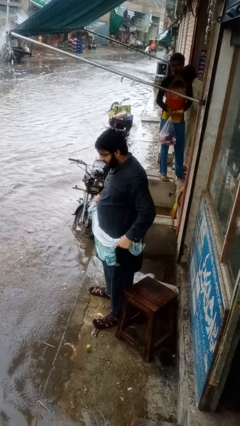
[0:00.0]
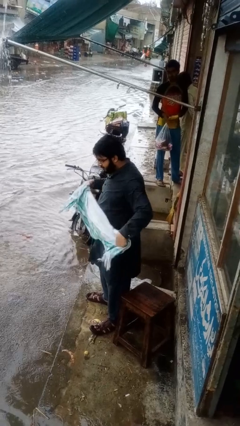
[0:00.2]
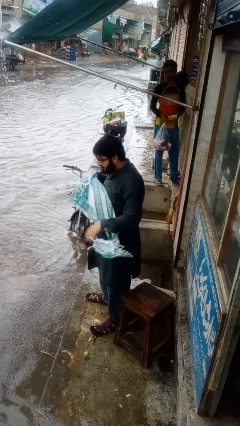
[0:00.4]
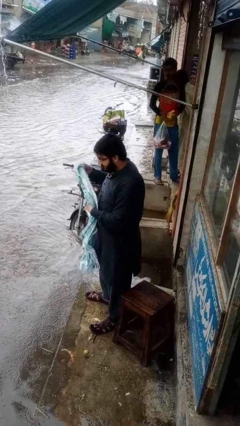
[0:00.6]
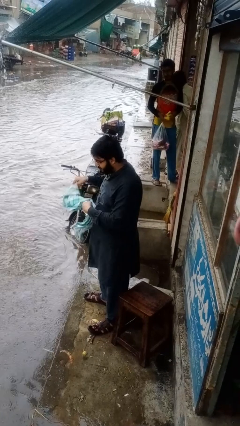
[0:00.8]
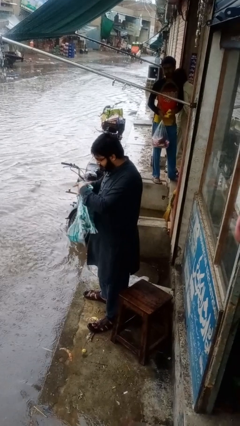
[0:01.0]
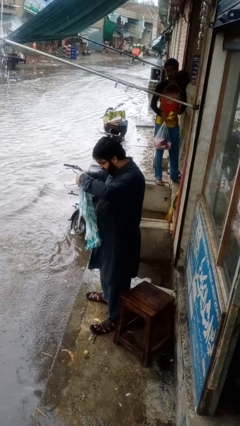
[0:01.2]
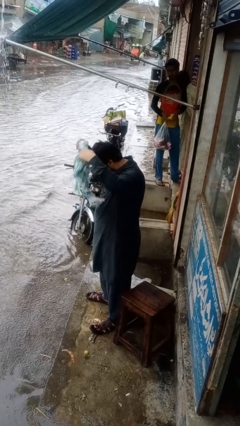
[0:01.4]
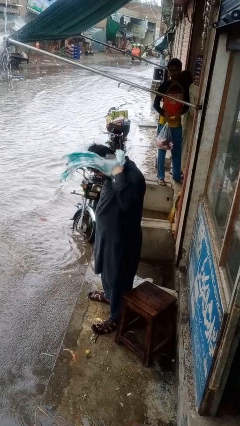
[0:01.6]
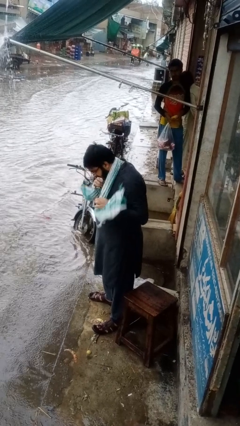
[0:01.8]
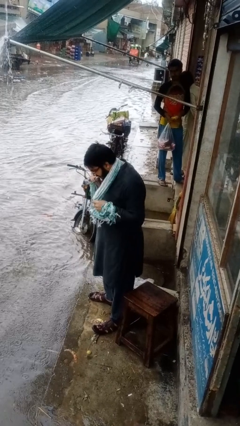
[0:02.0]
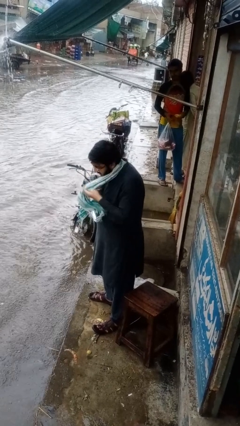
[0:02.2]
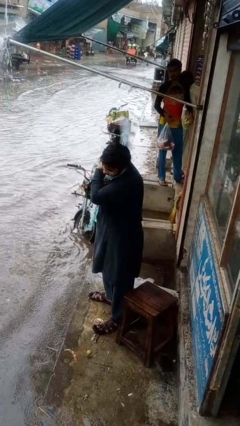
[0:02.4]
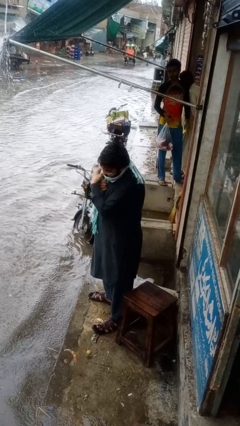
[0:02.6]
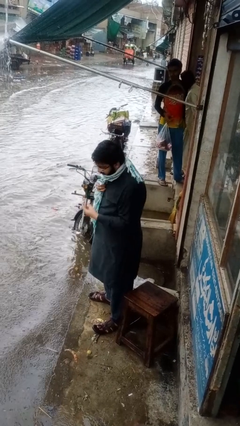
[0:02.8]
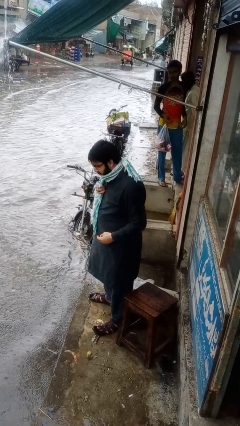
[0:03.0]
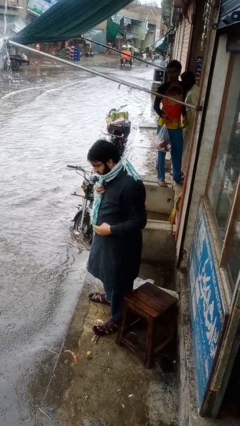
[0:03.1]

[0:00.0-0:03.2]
person puts on scarf

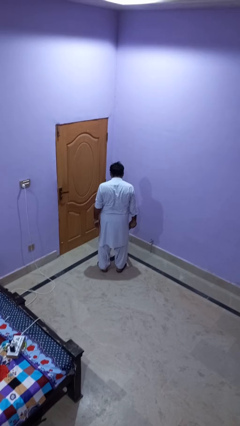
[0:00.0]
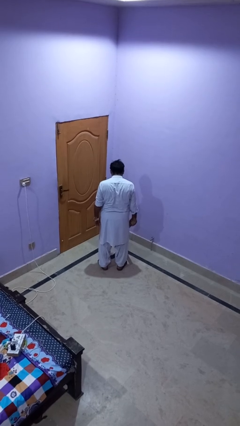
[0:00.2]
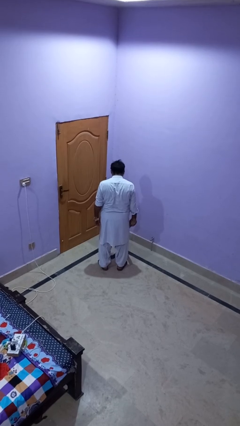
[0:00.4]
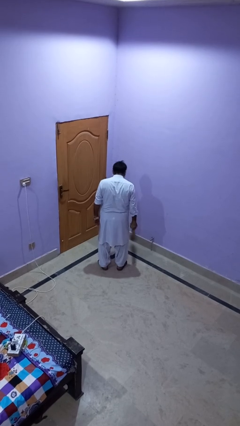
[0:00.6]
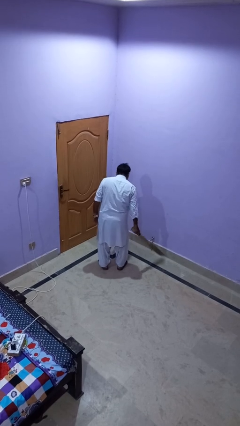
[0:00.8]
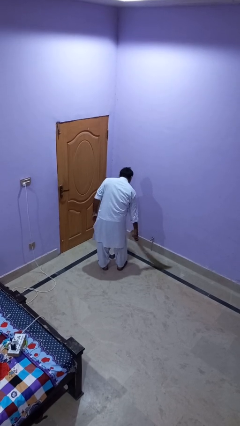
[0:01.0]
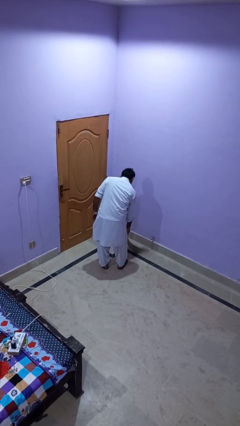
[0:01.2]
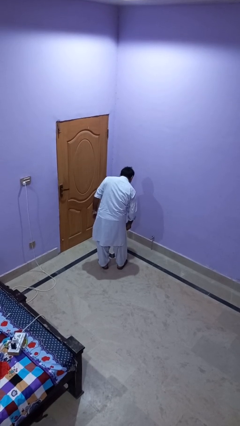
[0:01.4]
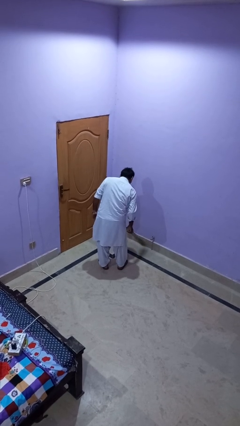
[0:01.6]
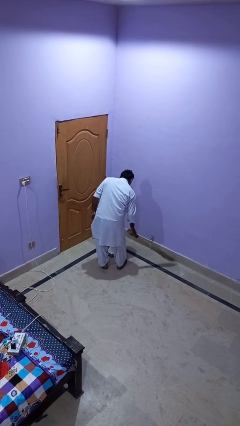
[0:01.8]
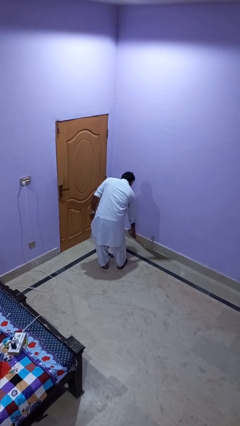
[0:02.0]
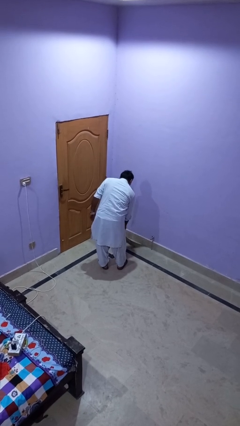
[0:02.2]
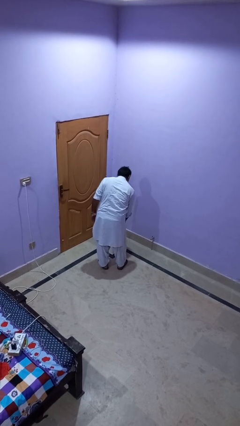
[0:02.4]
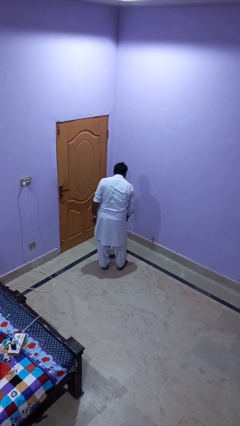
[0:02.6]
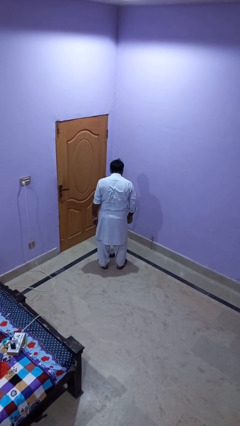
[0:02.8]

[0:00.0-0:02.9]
person sweeps floor

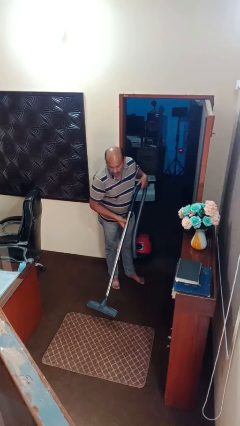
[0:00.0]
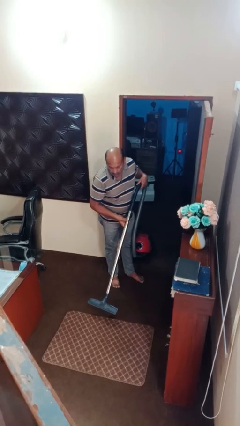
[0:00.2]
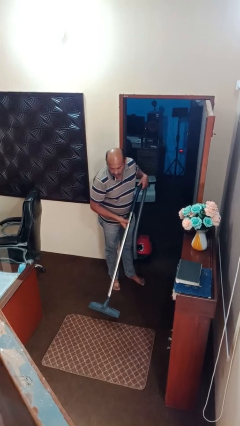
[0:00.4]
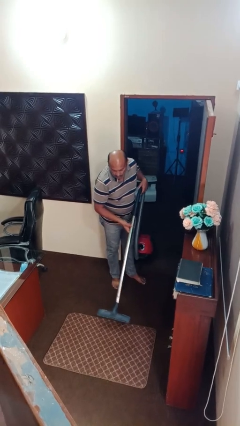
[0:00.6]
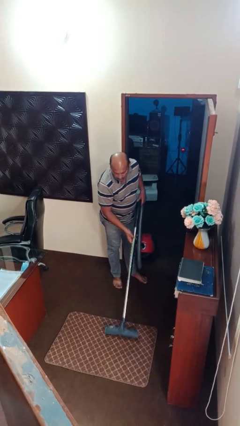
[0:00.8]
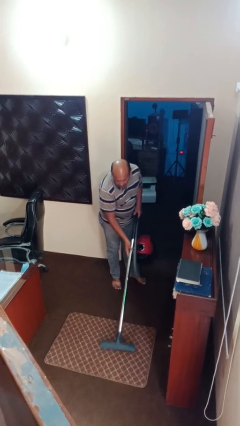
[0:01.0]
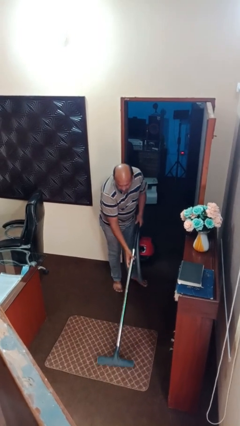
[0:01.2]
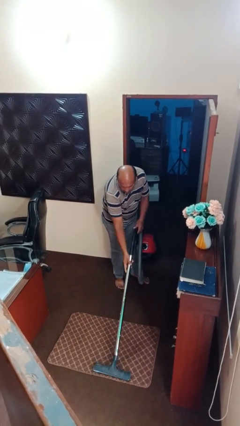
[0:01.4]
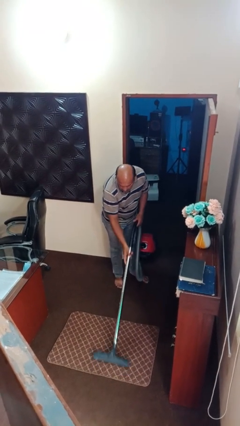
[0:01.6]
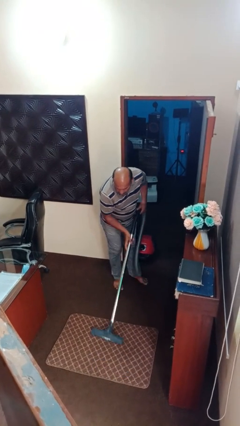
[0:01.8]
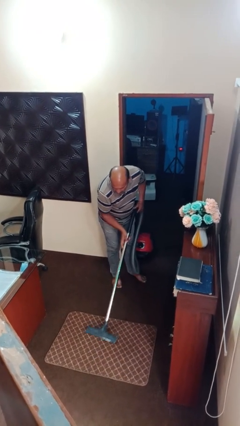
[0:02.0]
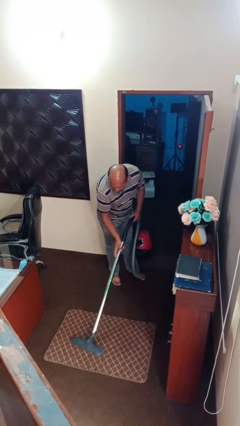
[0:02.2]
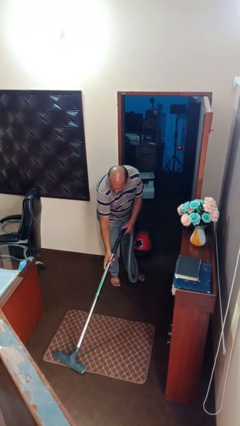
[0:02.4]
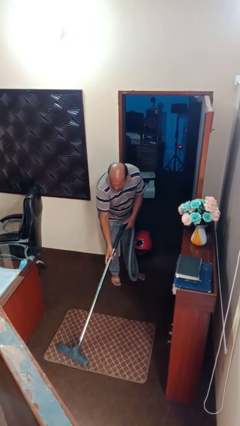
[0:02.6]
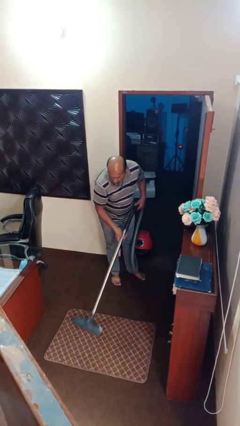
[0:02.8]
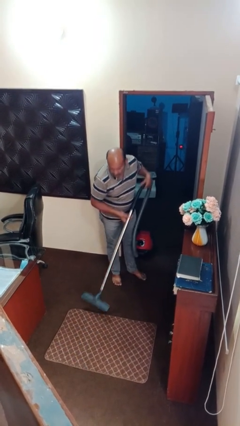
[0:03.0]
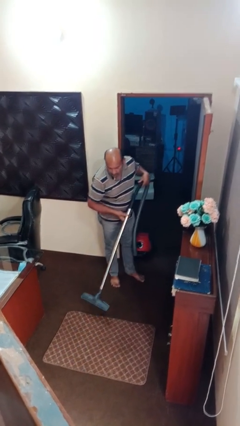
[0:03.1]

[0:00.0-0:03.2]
person vacuums carpet

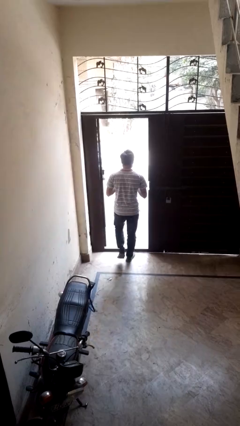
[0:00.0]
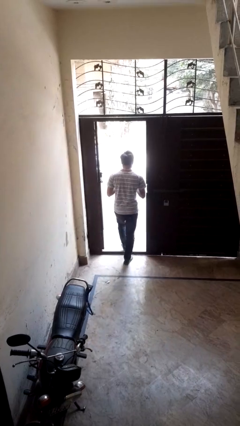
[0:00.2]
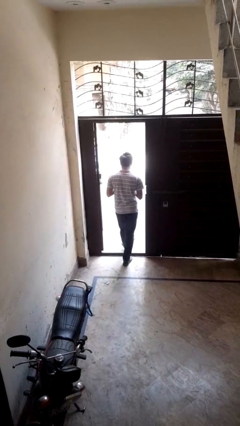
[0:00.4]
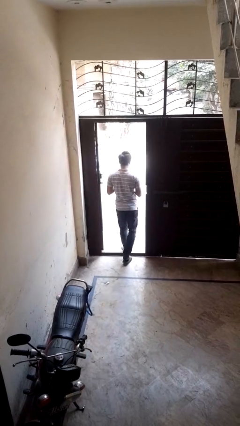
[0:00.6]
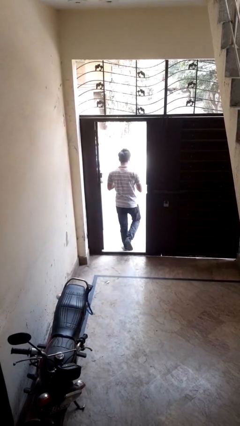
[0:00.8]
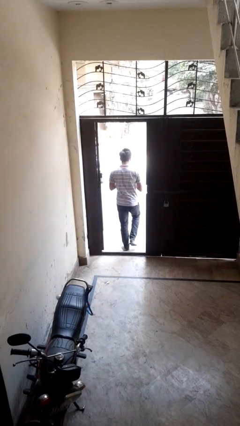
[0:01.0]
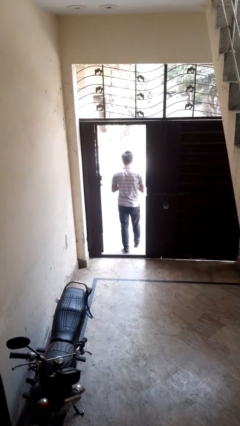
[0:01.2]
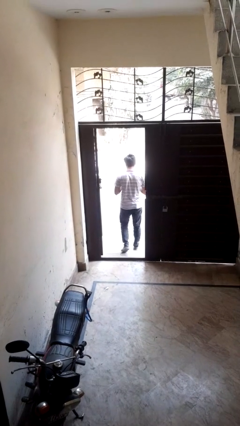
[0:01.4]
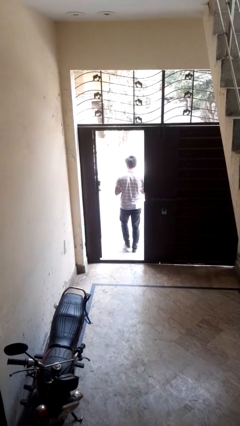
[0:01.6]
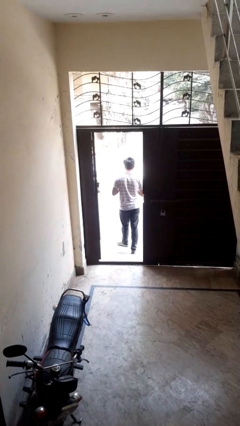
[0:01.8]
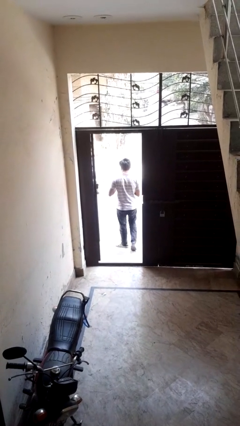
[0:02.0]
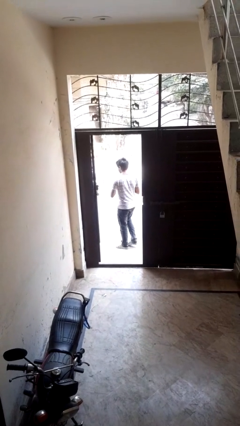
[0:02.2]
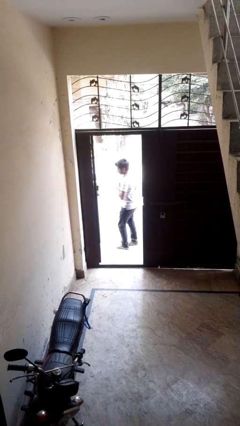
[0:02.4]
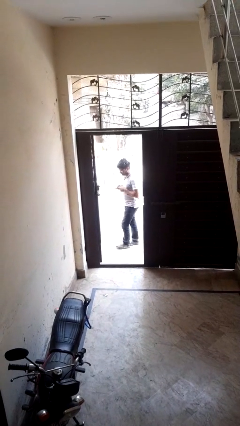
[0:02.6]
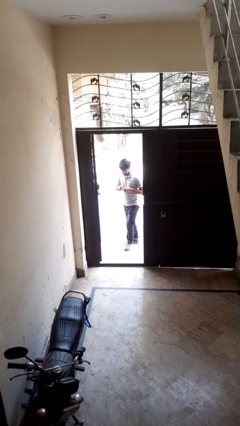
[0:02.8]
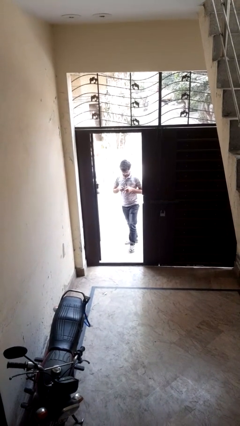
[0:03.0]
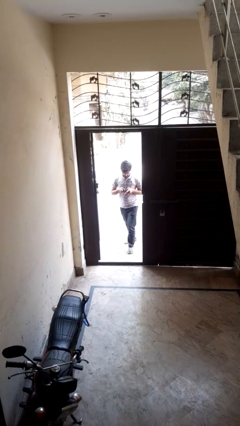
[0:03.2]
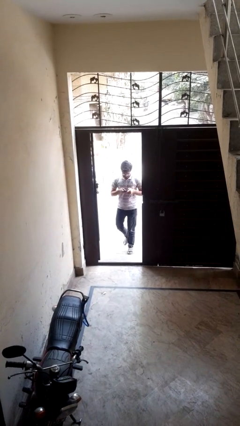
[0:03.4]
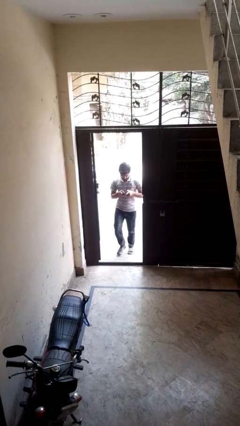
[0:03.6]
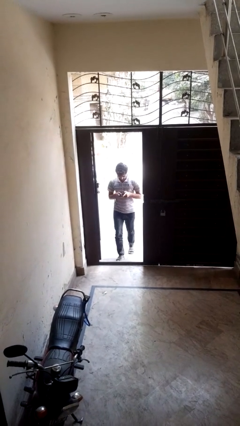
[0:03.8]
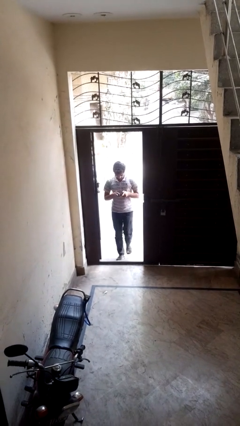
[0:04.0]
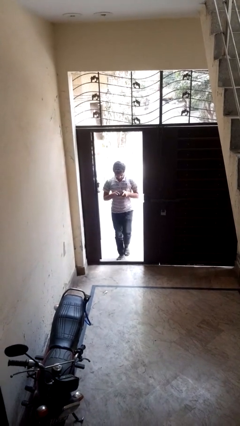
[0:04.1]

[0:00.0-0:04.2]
person exits scene through structure

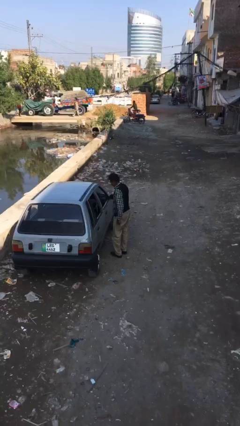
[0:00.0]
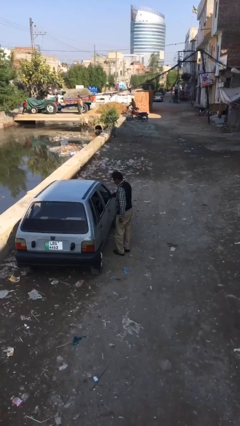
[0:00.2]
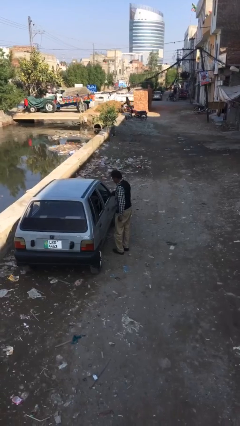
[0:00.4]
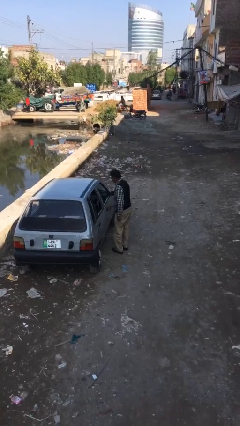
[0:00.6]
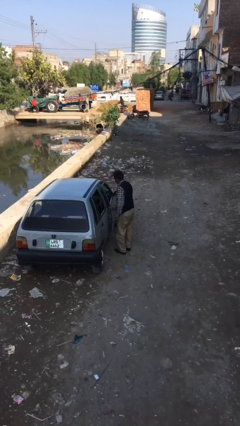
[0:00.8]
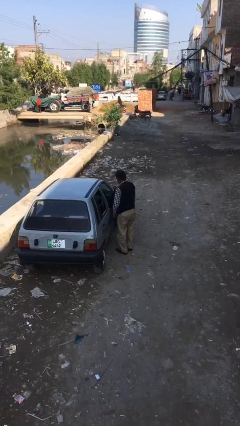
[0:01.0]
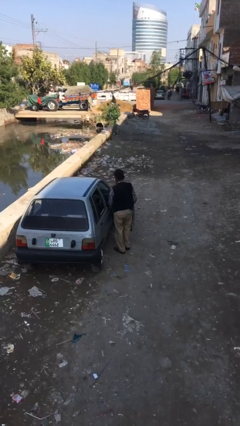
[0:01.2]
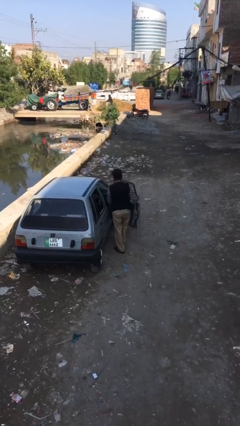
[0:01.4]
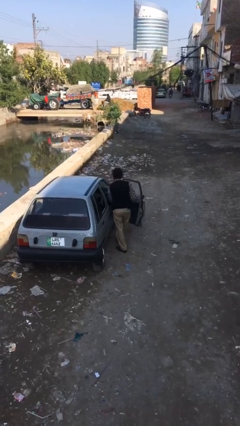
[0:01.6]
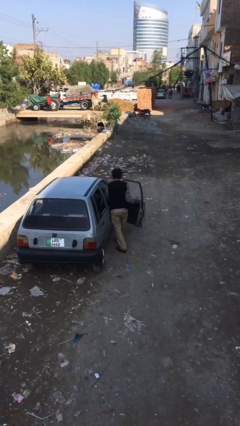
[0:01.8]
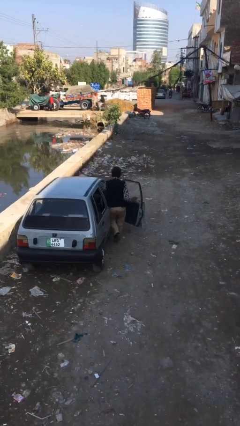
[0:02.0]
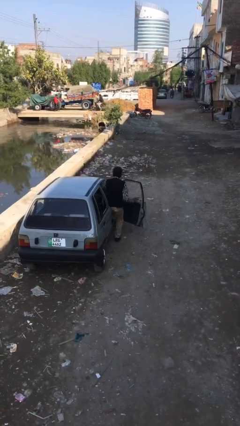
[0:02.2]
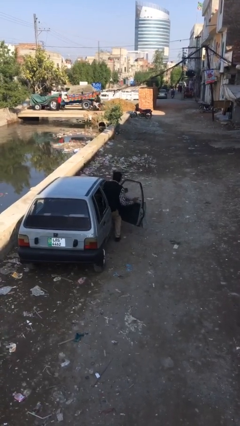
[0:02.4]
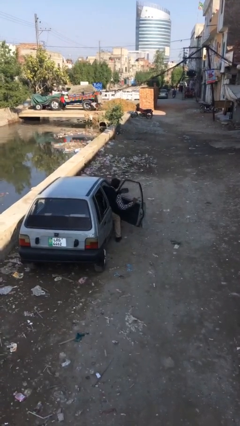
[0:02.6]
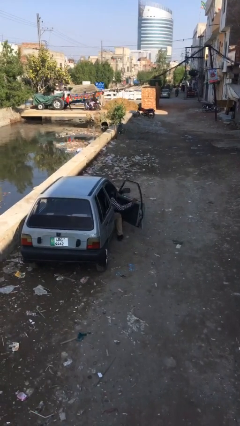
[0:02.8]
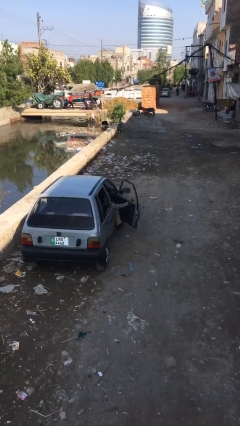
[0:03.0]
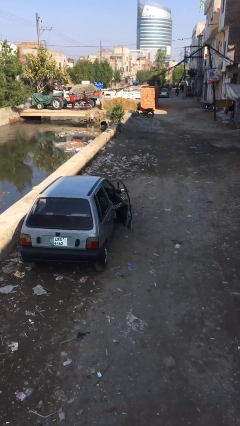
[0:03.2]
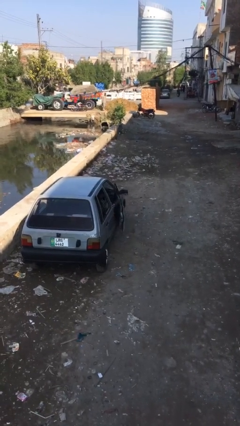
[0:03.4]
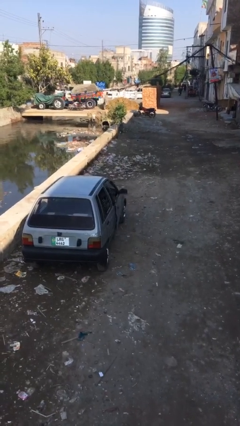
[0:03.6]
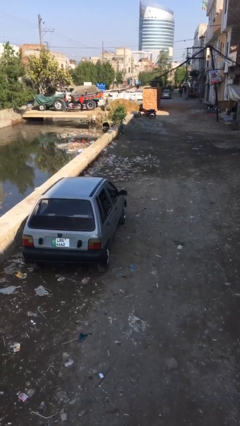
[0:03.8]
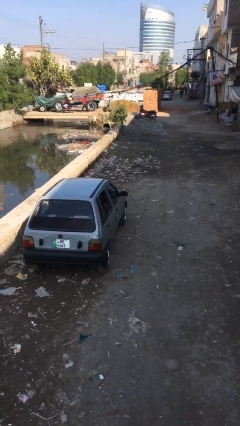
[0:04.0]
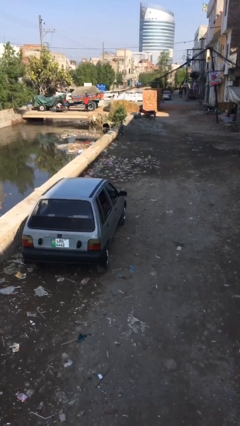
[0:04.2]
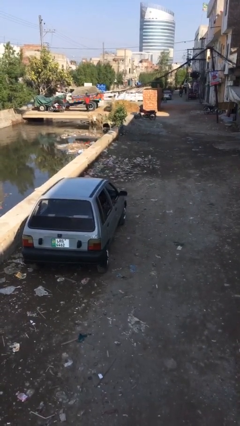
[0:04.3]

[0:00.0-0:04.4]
person enters car
